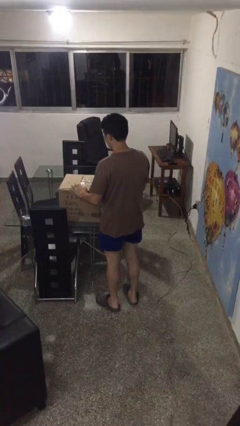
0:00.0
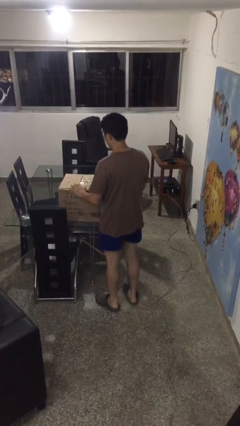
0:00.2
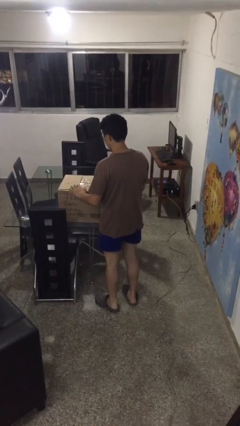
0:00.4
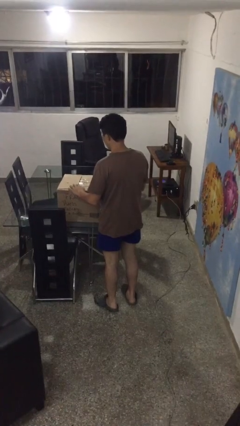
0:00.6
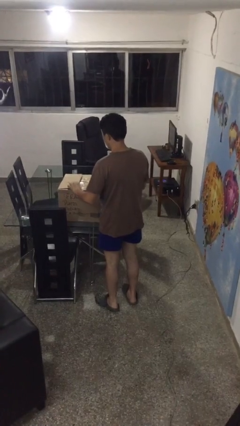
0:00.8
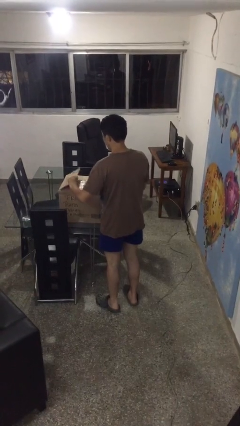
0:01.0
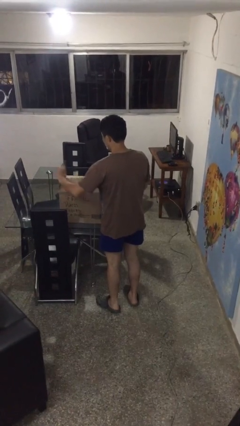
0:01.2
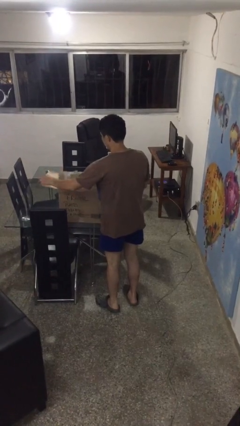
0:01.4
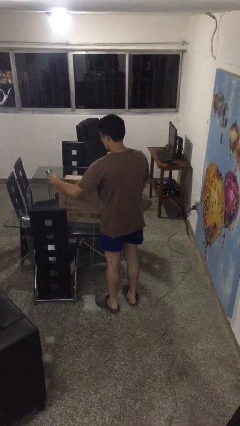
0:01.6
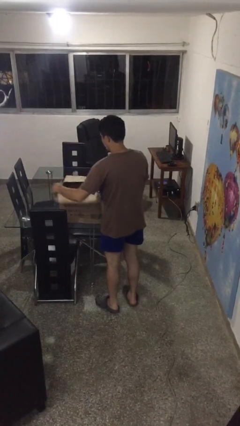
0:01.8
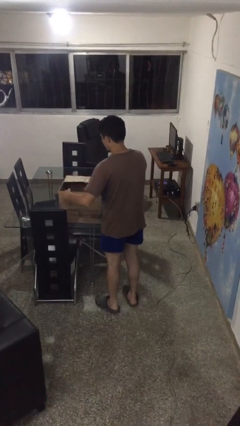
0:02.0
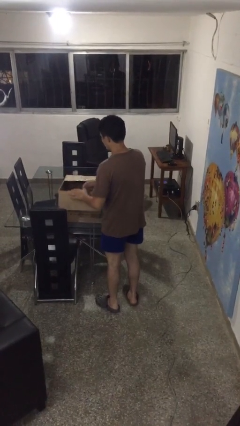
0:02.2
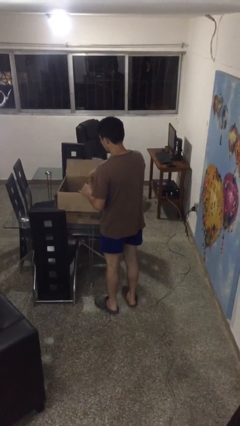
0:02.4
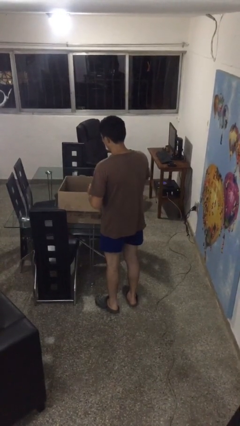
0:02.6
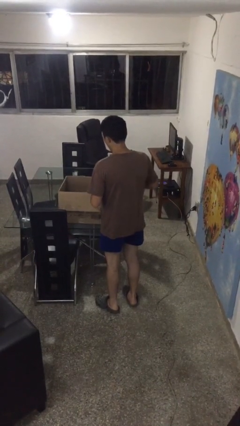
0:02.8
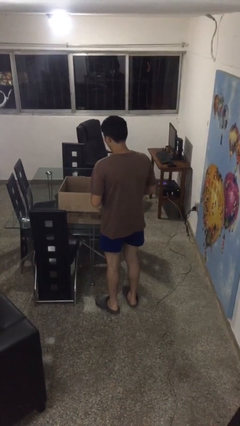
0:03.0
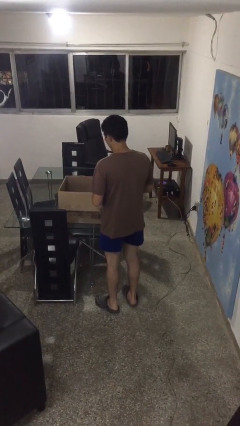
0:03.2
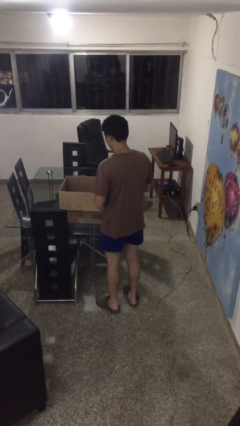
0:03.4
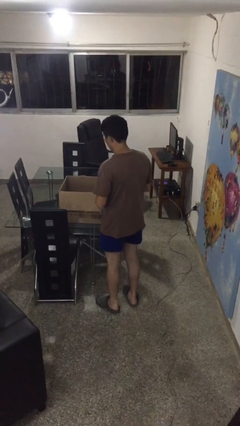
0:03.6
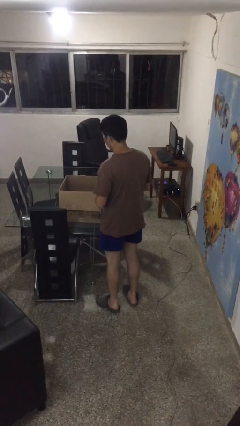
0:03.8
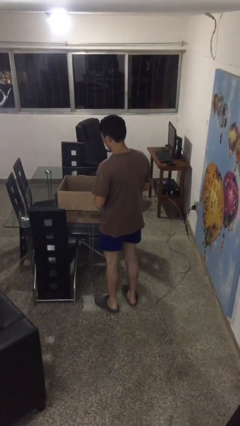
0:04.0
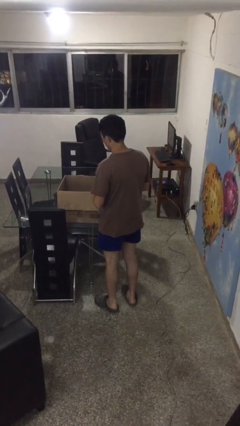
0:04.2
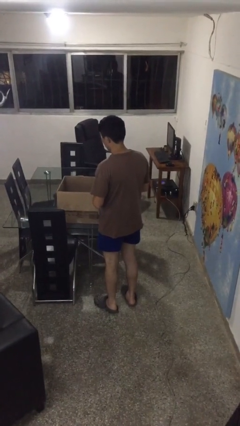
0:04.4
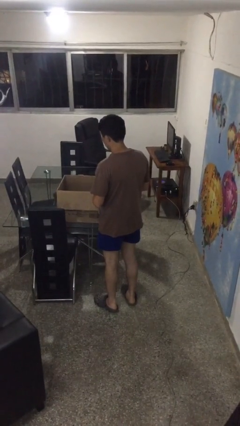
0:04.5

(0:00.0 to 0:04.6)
person opens box

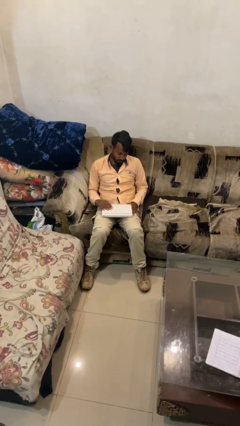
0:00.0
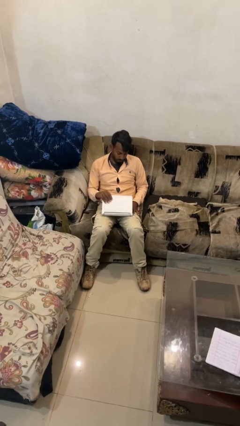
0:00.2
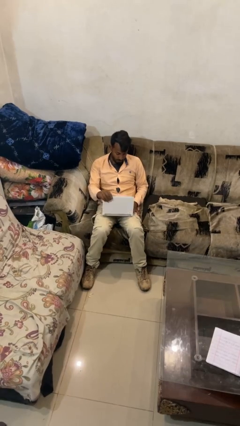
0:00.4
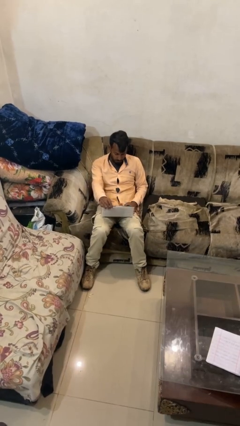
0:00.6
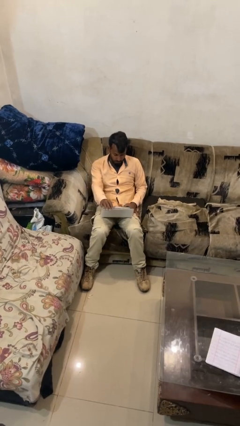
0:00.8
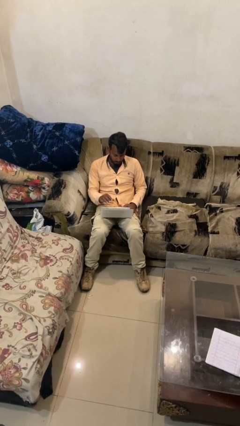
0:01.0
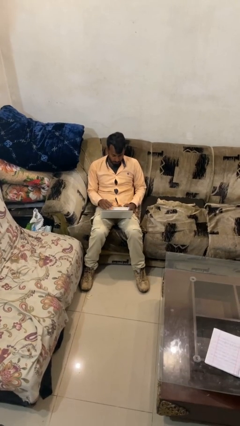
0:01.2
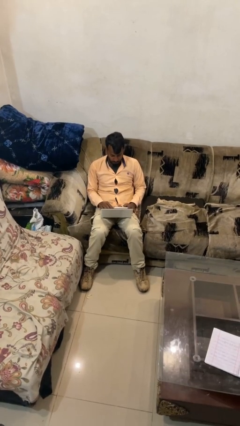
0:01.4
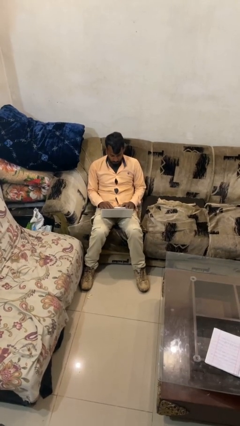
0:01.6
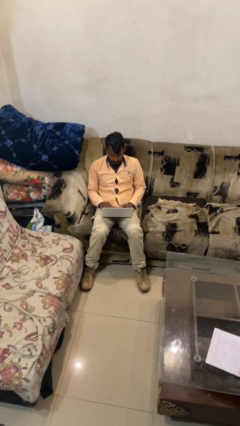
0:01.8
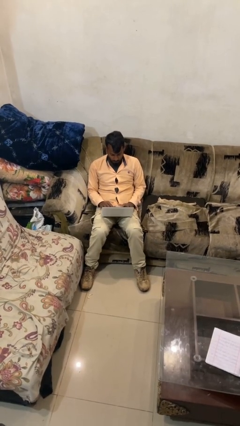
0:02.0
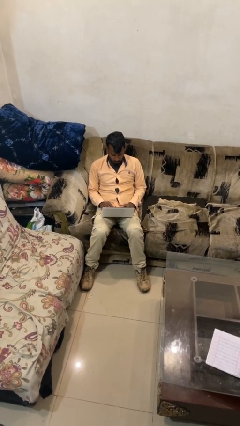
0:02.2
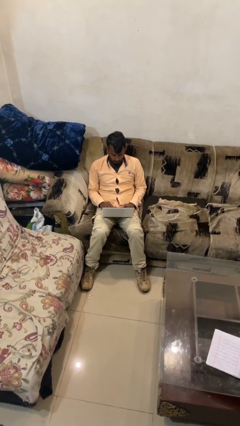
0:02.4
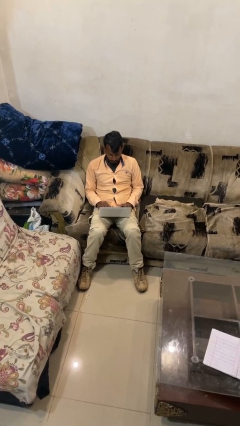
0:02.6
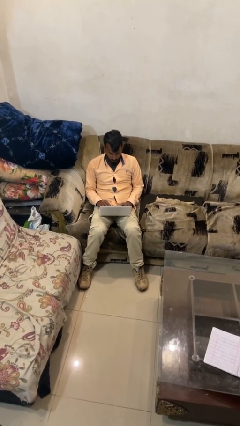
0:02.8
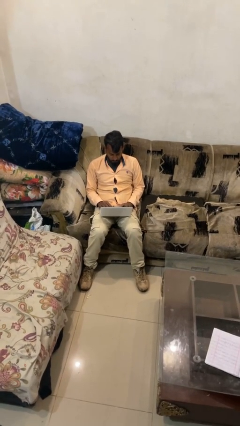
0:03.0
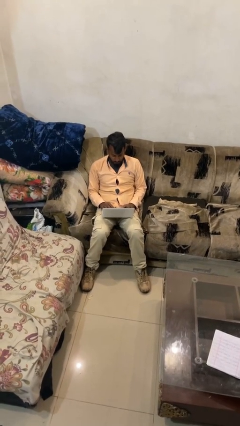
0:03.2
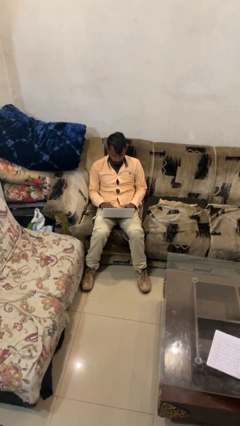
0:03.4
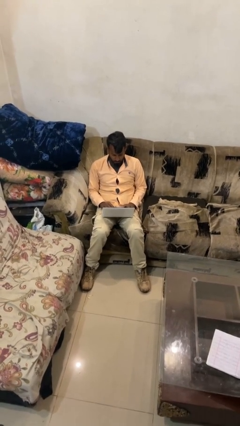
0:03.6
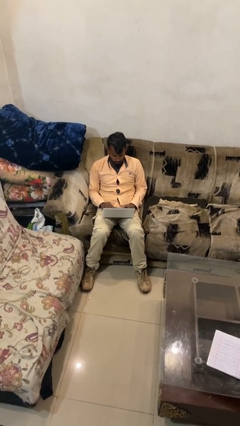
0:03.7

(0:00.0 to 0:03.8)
person interacts with laptop

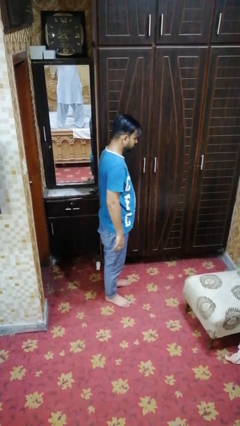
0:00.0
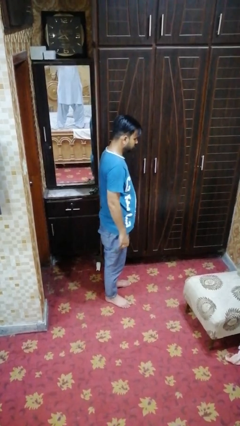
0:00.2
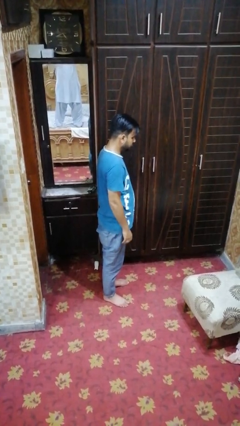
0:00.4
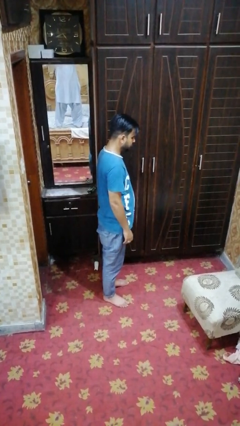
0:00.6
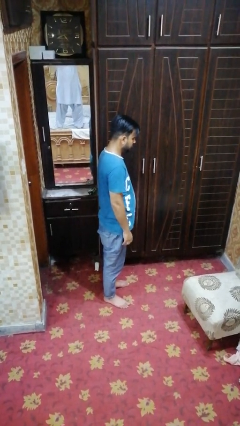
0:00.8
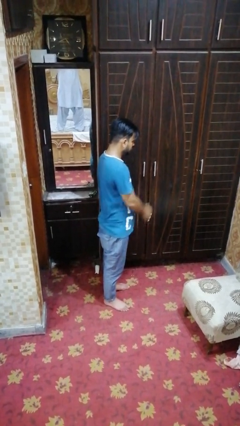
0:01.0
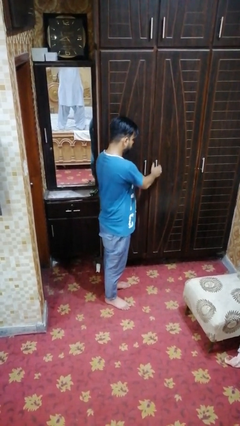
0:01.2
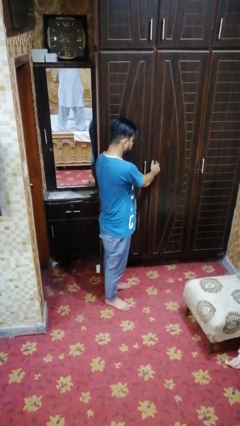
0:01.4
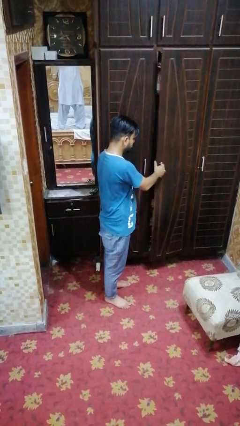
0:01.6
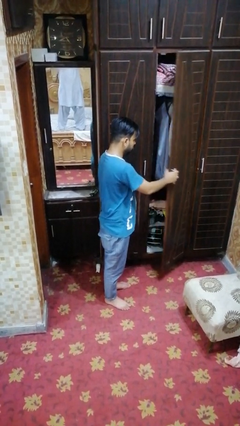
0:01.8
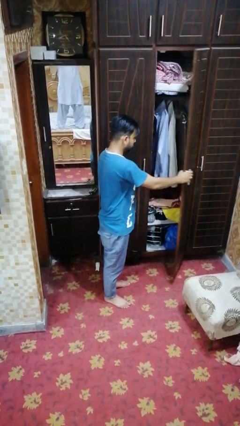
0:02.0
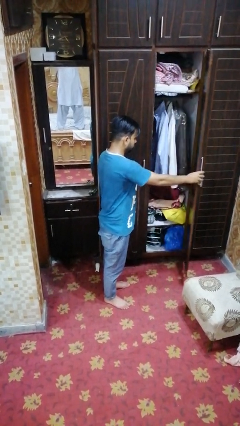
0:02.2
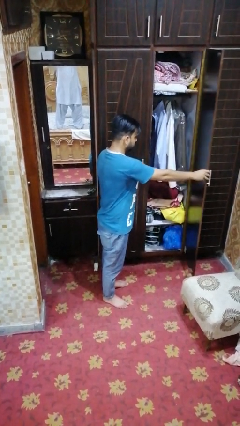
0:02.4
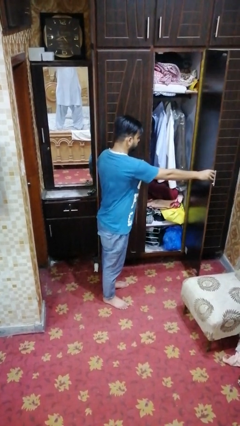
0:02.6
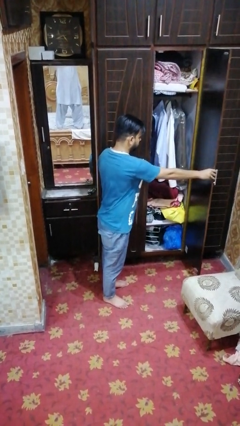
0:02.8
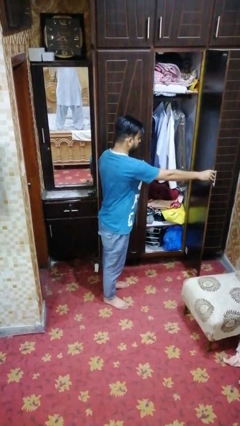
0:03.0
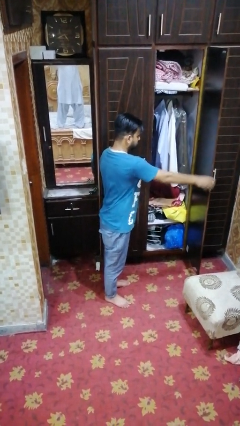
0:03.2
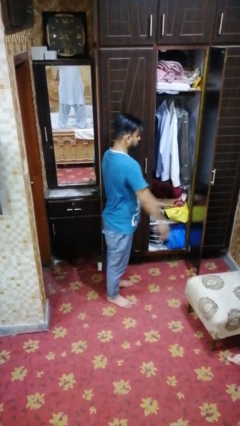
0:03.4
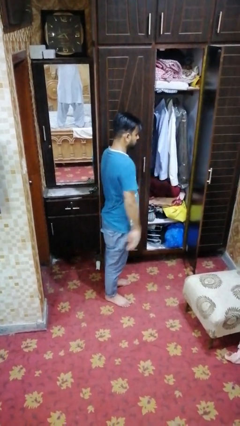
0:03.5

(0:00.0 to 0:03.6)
person opens closet door

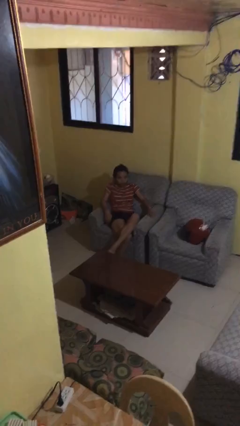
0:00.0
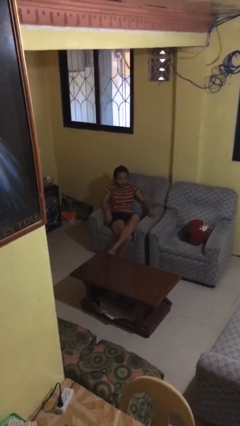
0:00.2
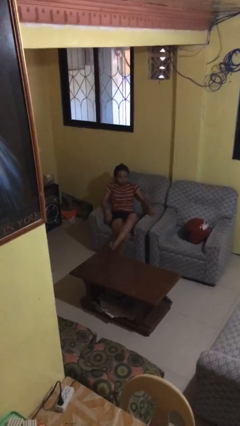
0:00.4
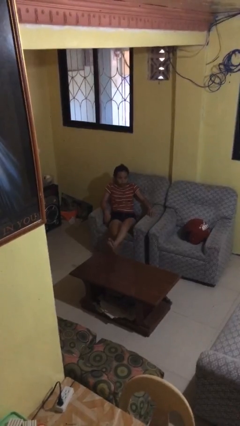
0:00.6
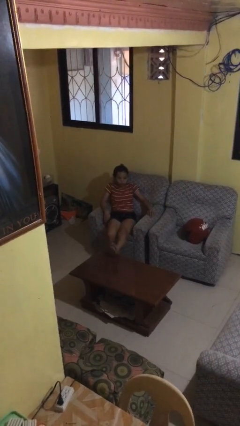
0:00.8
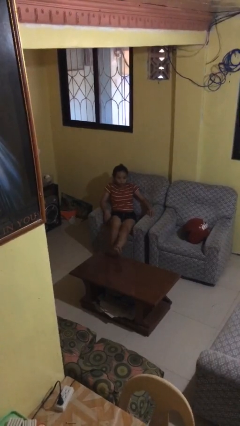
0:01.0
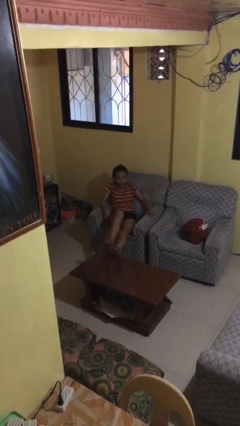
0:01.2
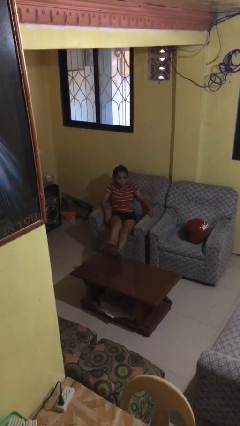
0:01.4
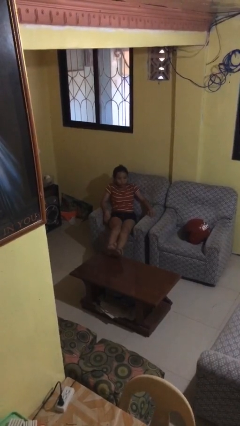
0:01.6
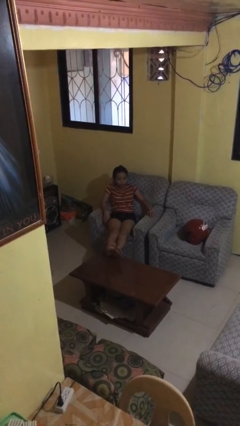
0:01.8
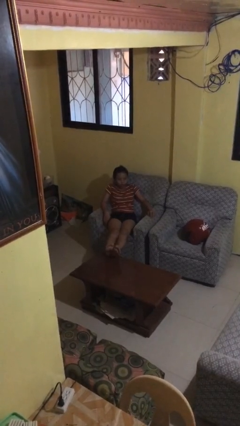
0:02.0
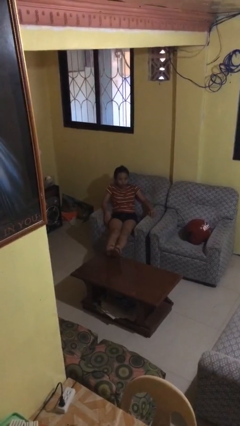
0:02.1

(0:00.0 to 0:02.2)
person puts feet up

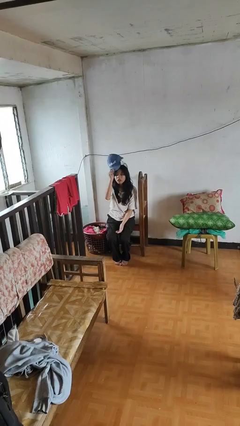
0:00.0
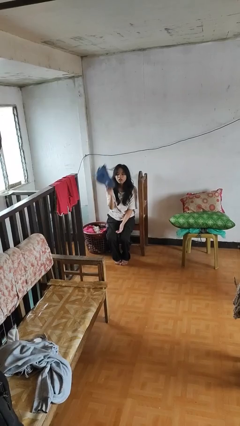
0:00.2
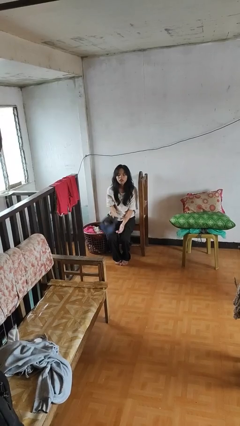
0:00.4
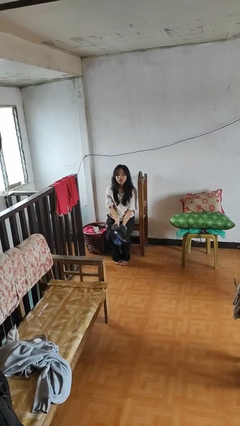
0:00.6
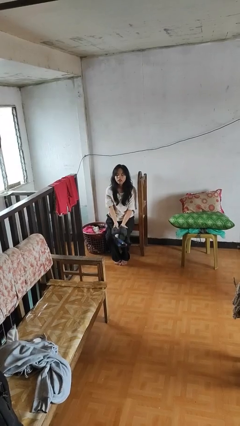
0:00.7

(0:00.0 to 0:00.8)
person takes off hat

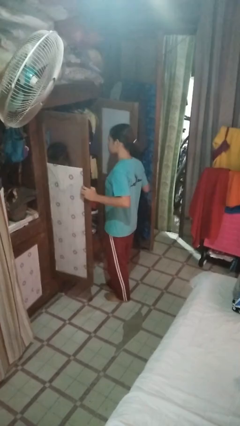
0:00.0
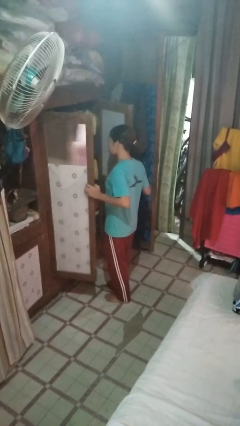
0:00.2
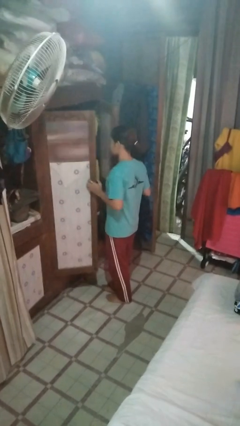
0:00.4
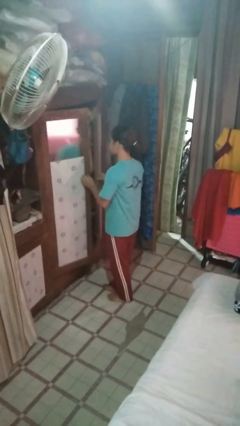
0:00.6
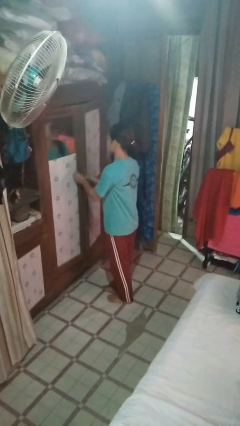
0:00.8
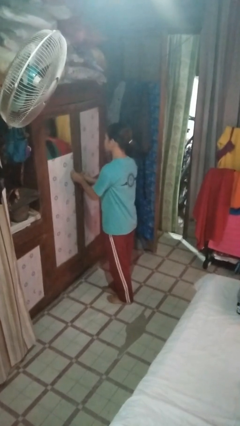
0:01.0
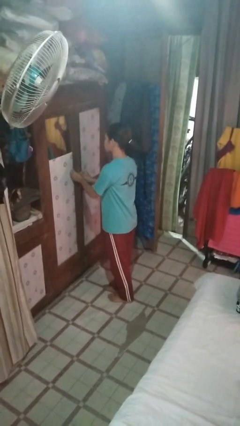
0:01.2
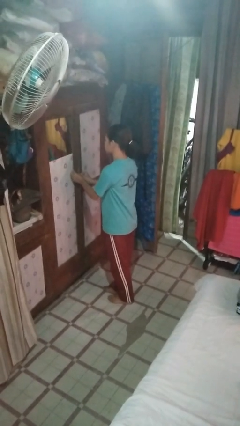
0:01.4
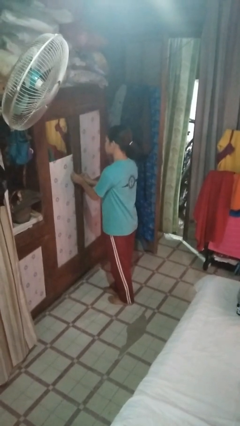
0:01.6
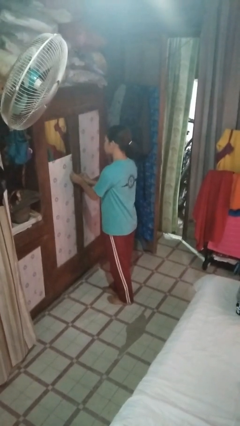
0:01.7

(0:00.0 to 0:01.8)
person closes closet door

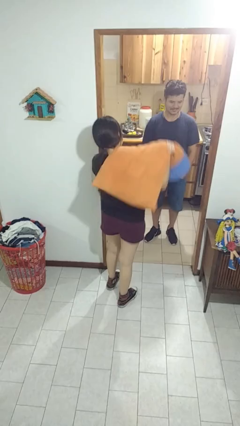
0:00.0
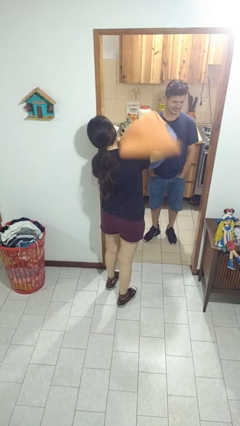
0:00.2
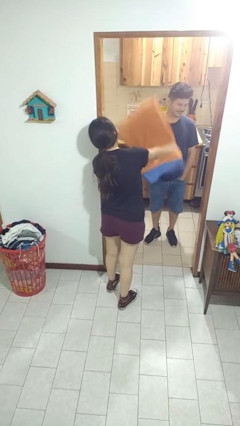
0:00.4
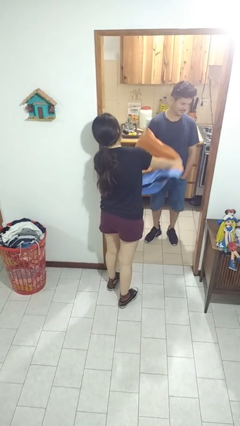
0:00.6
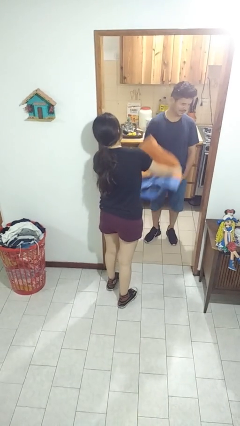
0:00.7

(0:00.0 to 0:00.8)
person hits person with pillow
